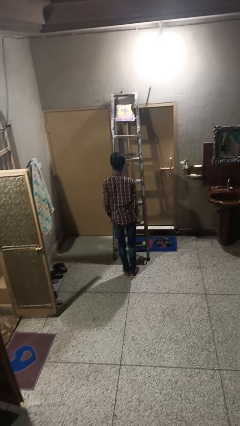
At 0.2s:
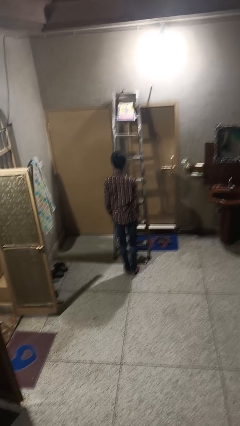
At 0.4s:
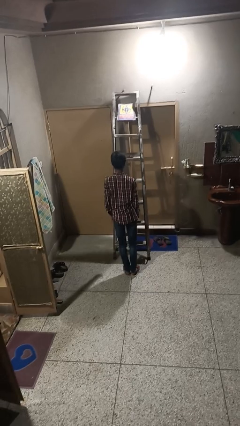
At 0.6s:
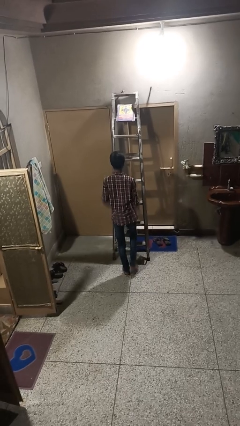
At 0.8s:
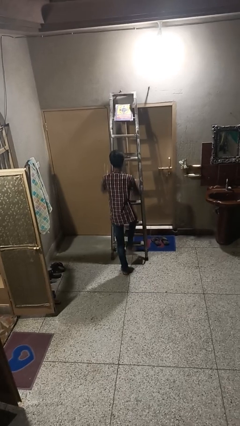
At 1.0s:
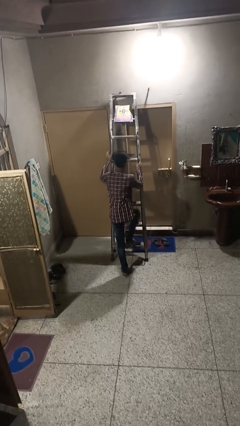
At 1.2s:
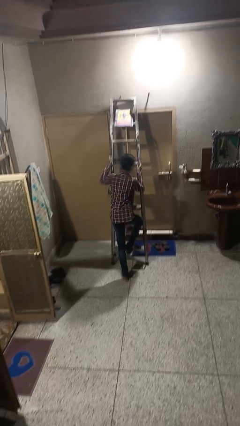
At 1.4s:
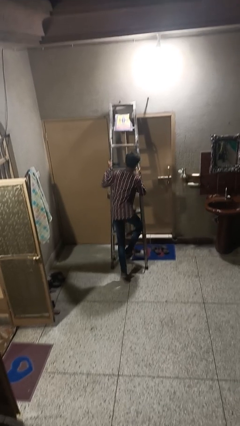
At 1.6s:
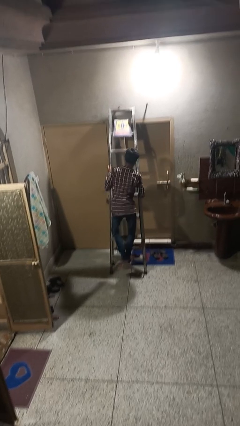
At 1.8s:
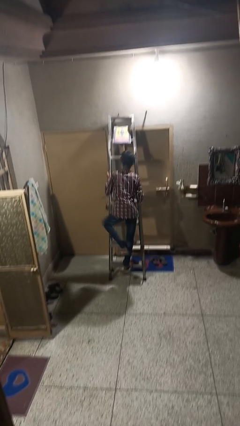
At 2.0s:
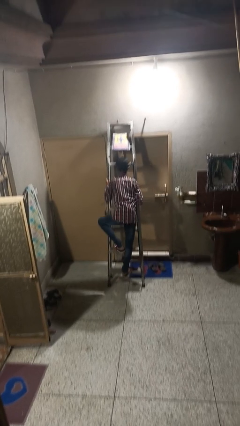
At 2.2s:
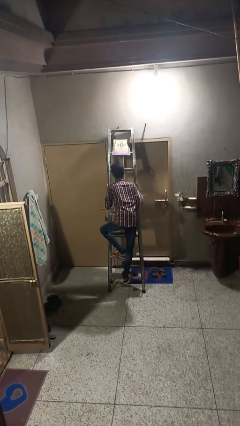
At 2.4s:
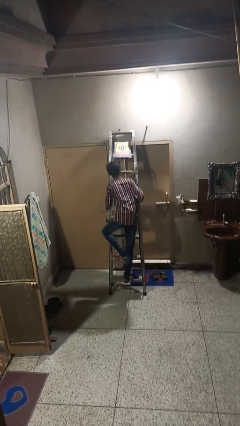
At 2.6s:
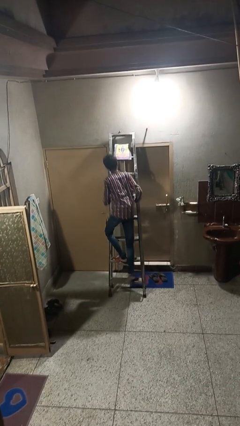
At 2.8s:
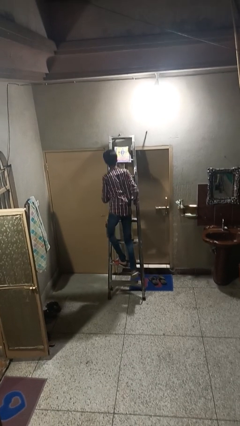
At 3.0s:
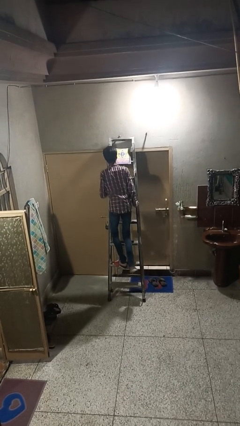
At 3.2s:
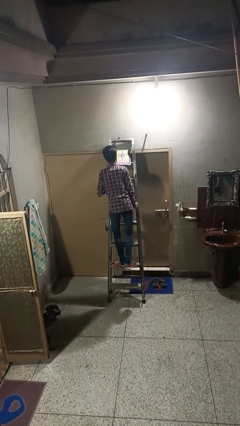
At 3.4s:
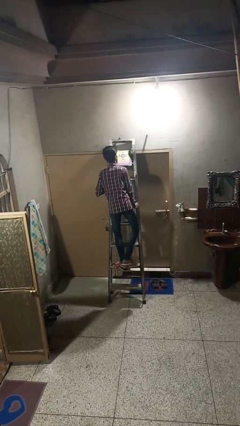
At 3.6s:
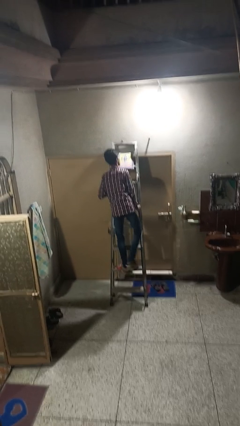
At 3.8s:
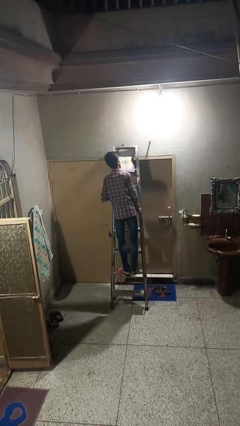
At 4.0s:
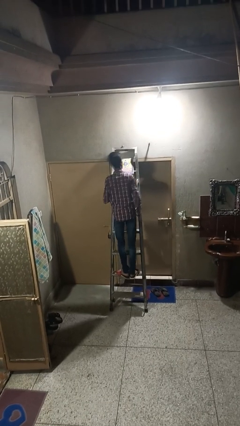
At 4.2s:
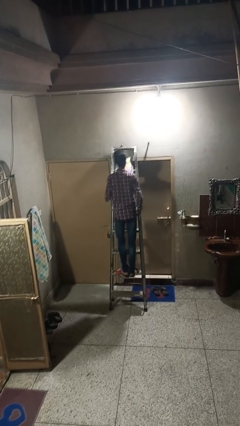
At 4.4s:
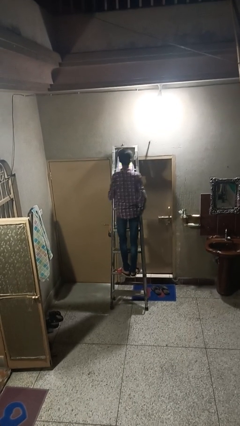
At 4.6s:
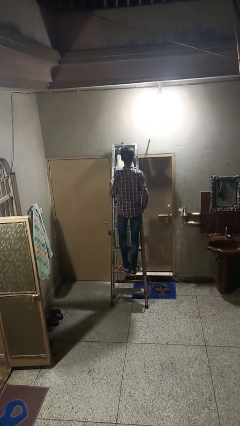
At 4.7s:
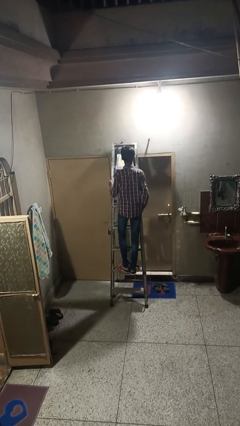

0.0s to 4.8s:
person climbs up ladder

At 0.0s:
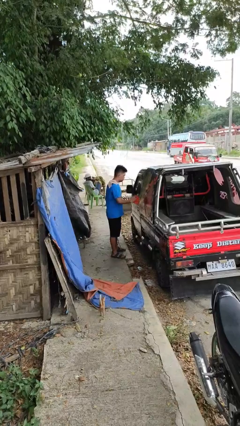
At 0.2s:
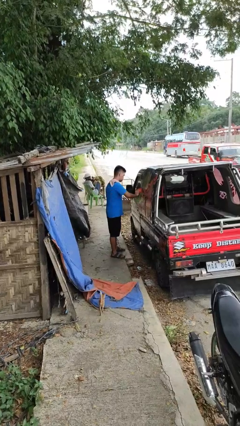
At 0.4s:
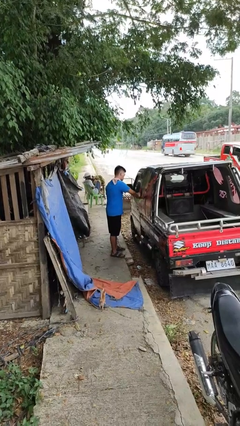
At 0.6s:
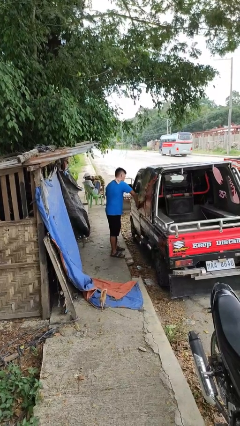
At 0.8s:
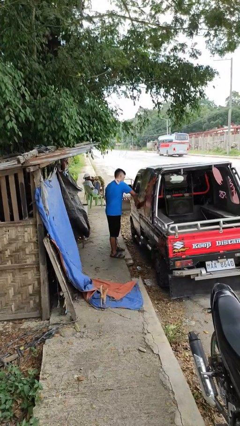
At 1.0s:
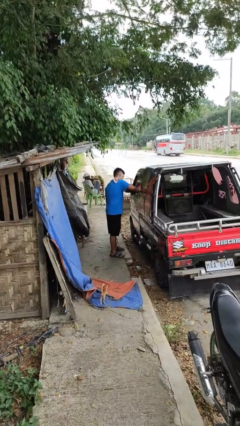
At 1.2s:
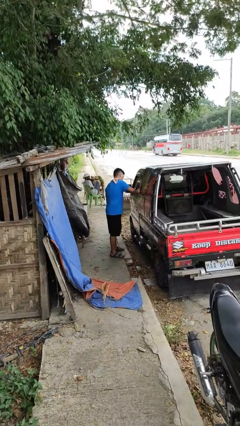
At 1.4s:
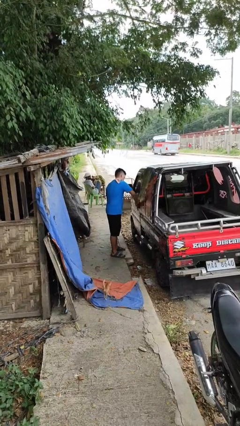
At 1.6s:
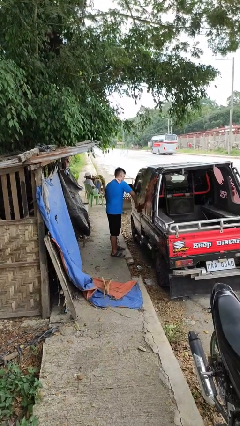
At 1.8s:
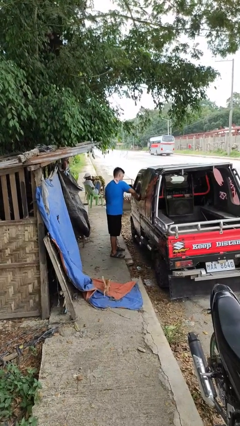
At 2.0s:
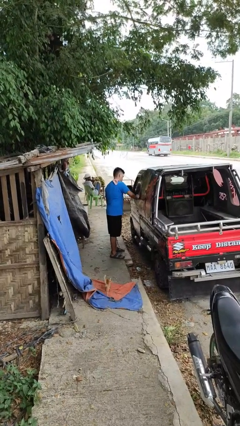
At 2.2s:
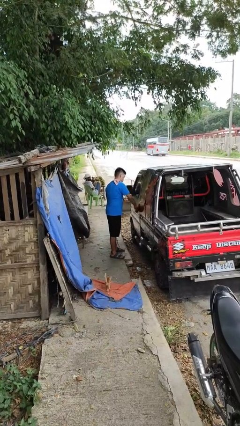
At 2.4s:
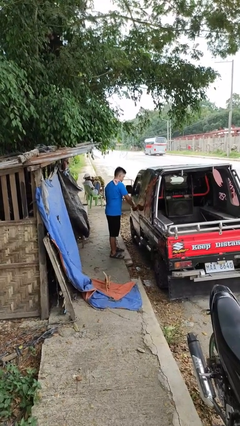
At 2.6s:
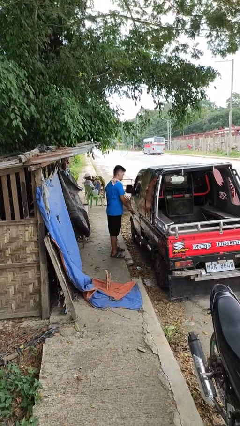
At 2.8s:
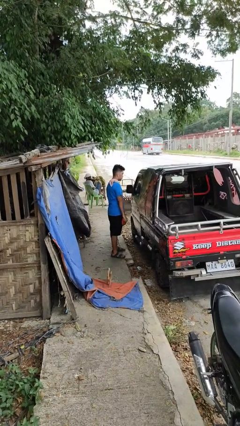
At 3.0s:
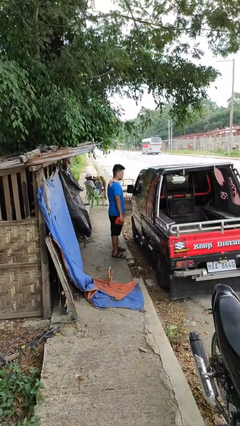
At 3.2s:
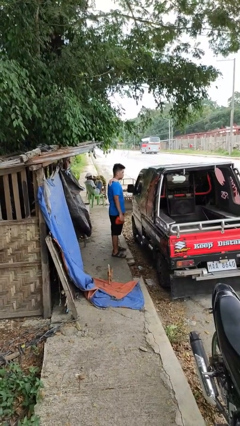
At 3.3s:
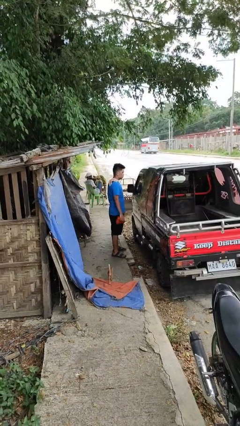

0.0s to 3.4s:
person polishes car with rag

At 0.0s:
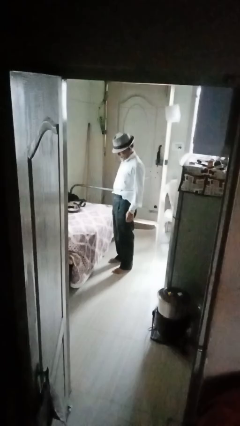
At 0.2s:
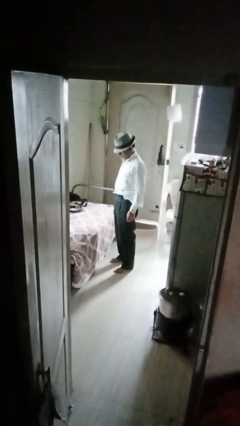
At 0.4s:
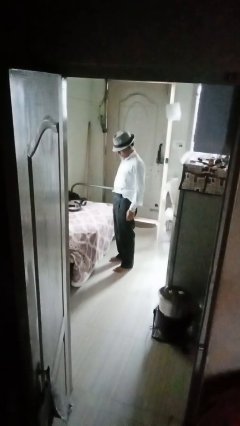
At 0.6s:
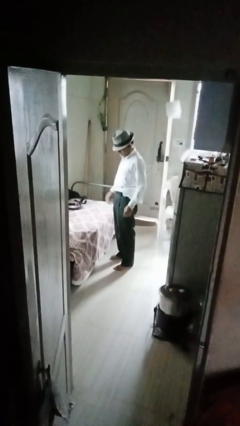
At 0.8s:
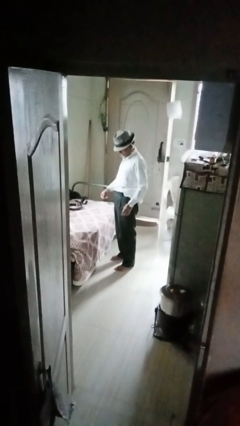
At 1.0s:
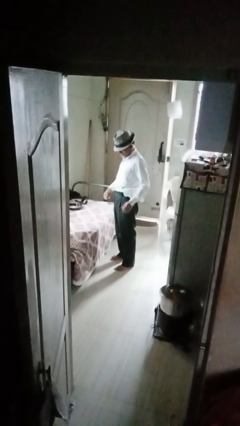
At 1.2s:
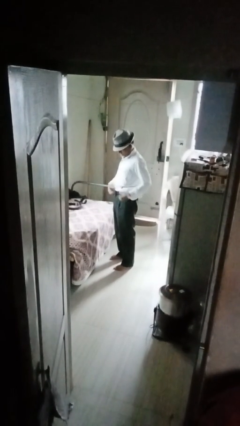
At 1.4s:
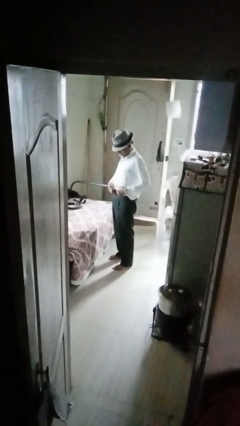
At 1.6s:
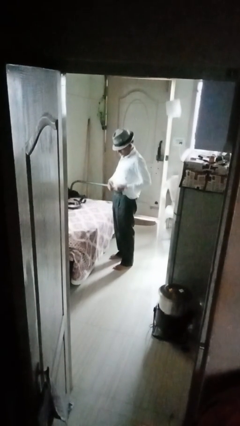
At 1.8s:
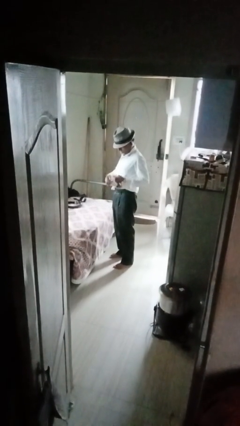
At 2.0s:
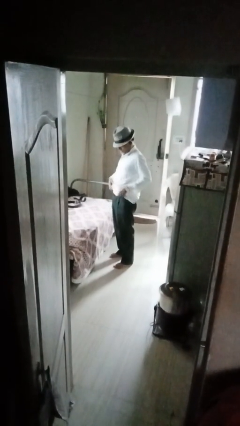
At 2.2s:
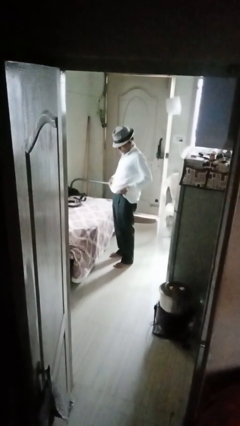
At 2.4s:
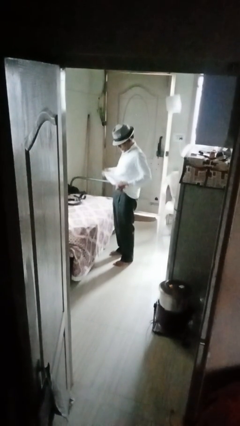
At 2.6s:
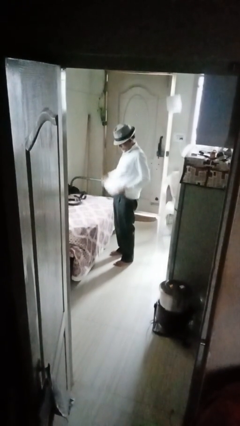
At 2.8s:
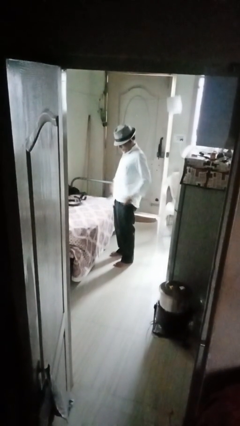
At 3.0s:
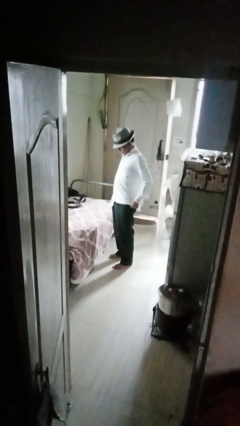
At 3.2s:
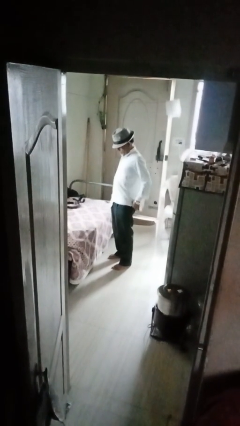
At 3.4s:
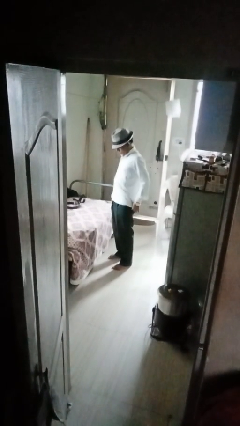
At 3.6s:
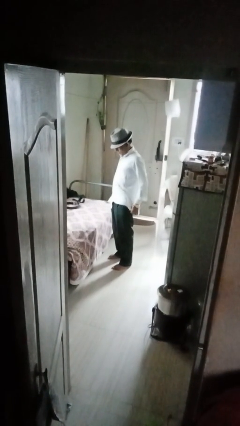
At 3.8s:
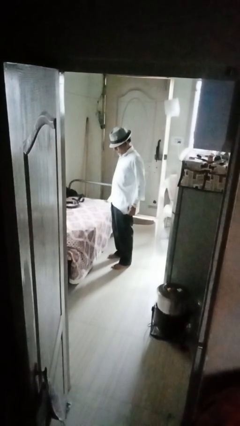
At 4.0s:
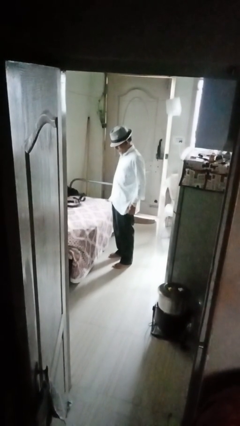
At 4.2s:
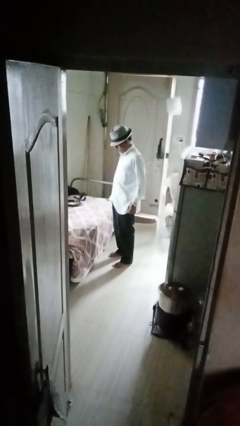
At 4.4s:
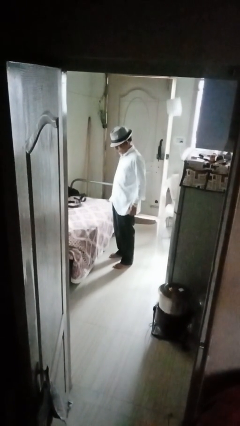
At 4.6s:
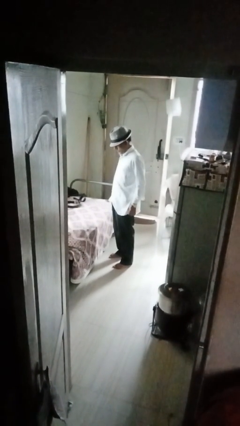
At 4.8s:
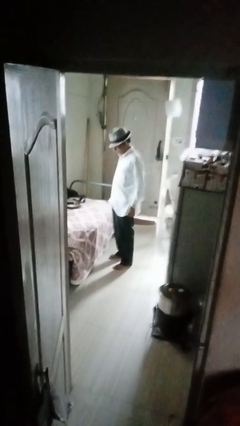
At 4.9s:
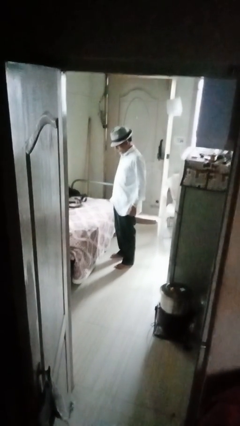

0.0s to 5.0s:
person untucks shirt

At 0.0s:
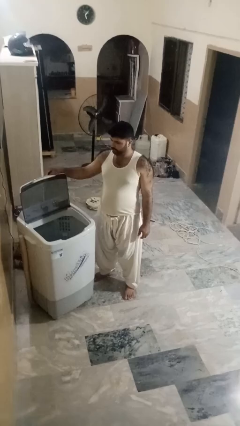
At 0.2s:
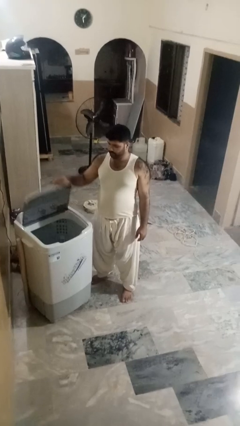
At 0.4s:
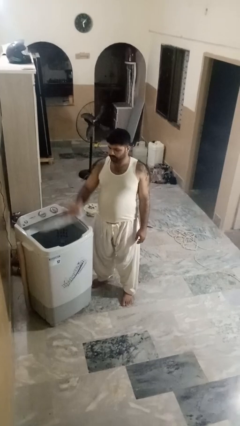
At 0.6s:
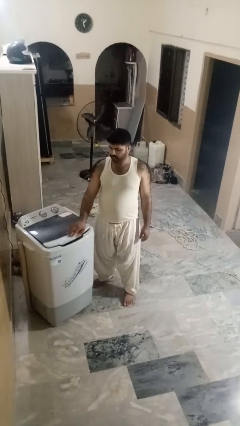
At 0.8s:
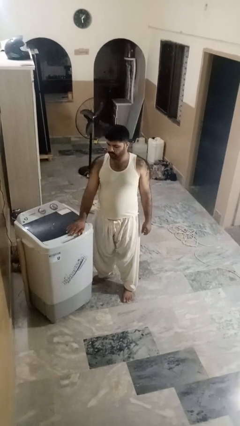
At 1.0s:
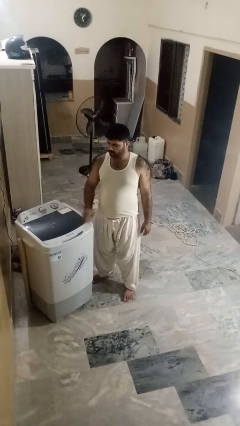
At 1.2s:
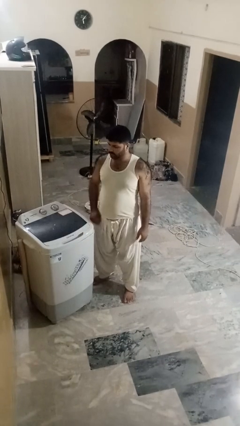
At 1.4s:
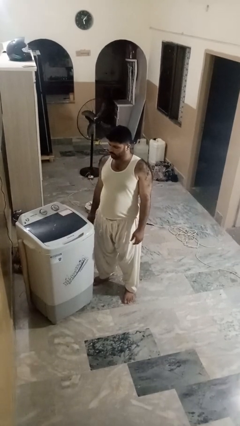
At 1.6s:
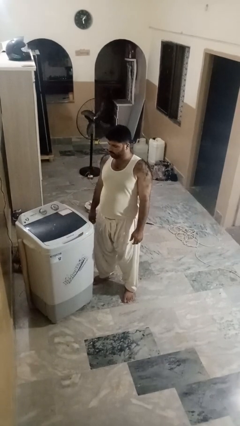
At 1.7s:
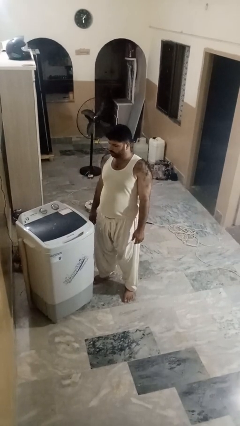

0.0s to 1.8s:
person closes clothes washer

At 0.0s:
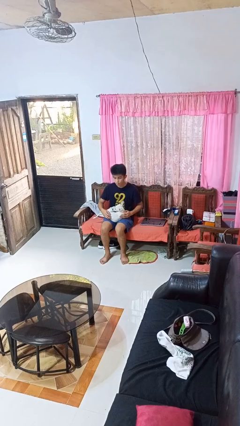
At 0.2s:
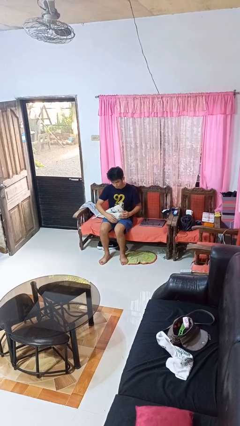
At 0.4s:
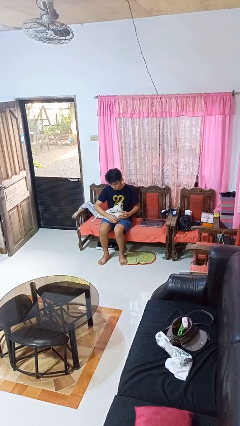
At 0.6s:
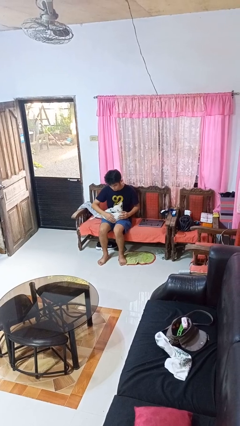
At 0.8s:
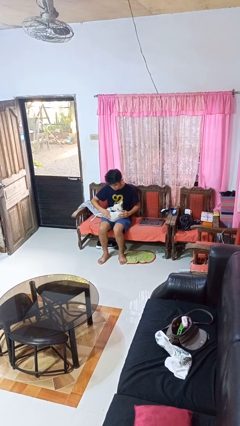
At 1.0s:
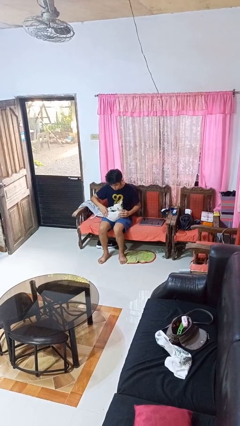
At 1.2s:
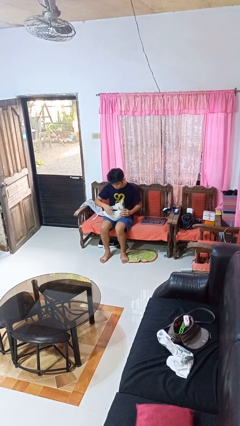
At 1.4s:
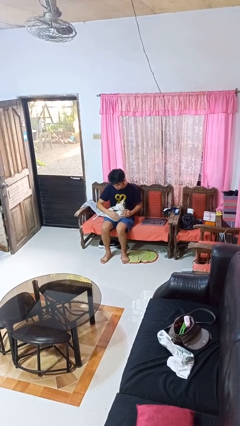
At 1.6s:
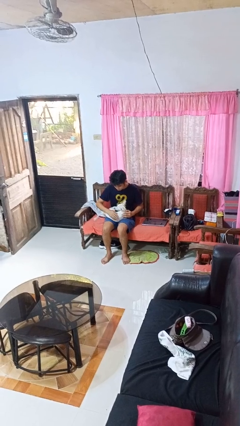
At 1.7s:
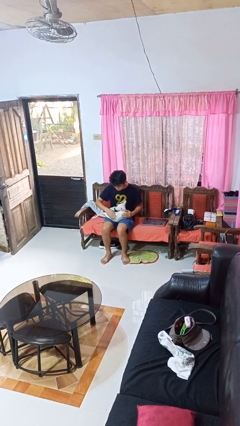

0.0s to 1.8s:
person pets dog

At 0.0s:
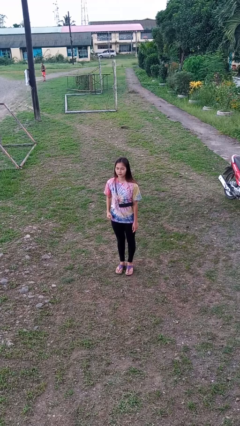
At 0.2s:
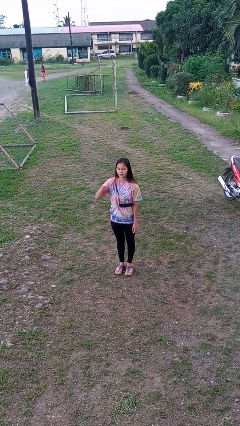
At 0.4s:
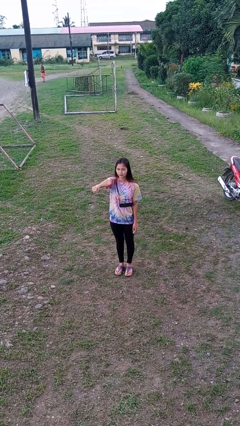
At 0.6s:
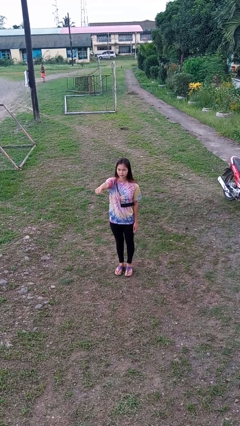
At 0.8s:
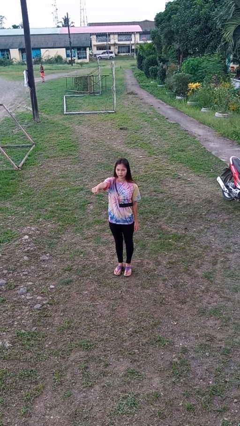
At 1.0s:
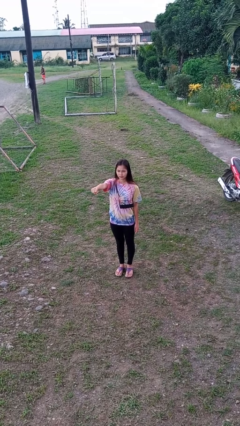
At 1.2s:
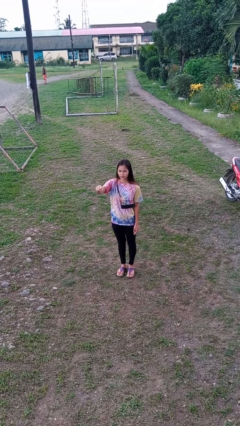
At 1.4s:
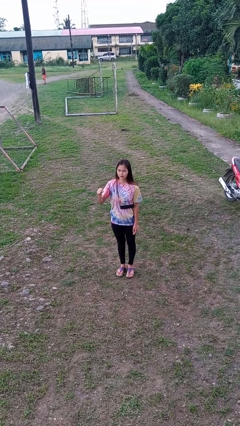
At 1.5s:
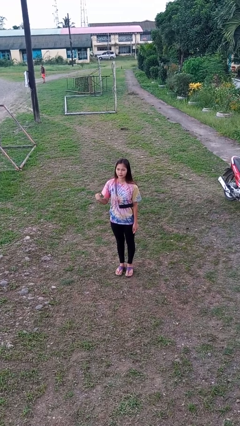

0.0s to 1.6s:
person punches
